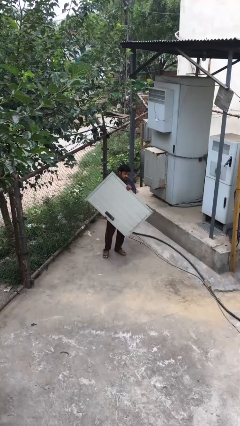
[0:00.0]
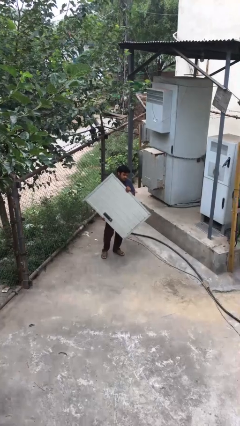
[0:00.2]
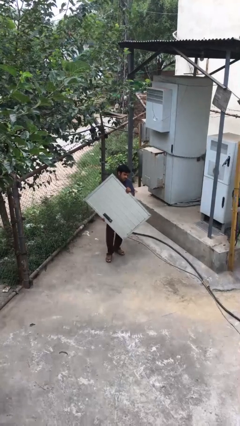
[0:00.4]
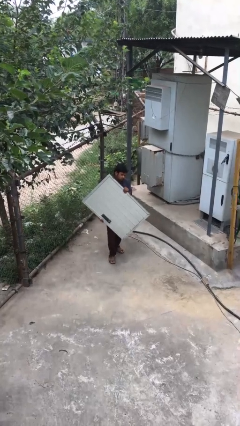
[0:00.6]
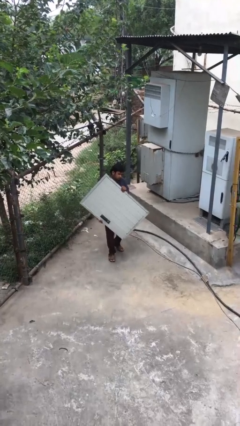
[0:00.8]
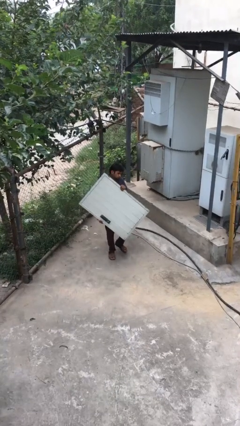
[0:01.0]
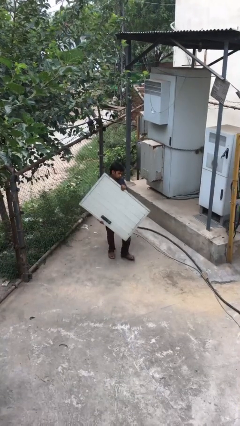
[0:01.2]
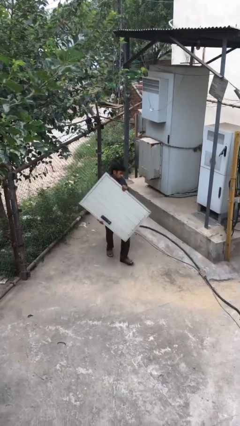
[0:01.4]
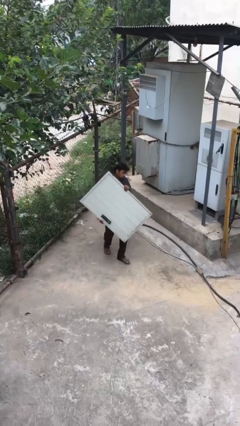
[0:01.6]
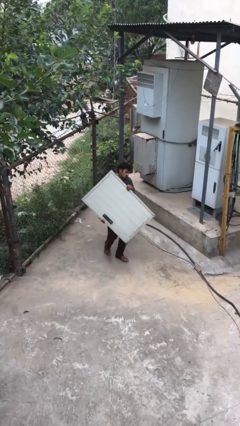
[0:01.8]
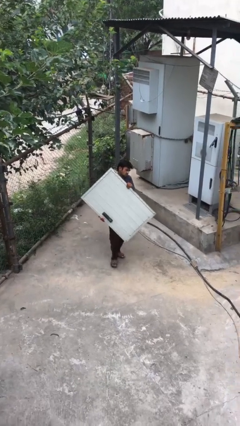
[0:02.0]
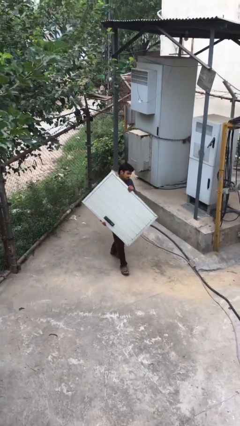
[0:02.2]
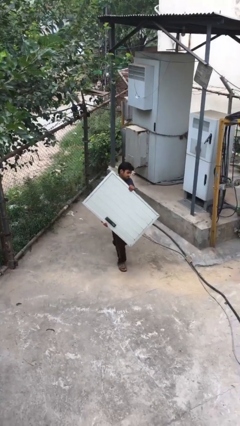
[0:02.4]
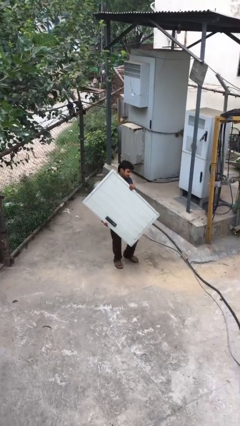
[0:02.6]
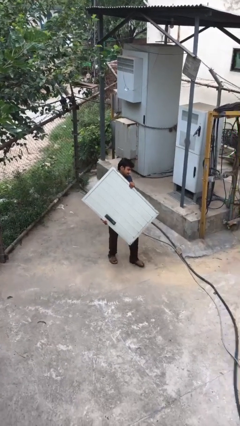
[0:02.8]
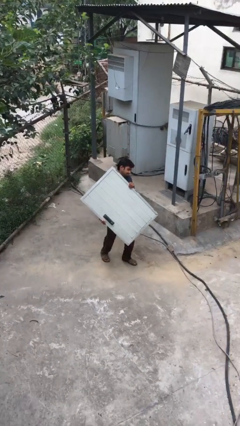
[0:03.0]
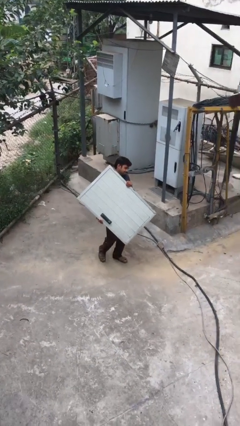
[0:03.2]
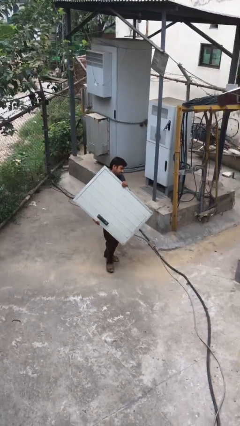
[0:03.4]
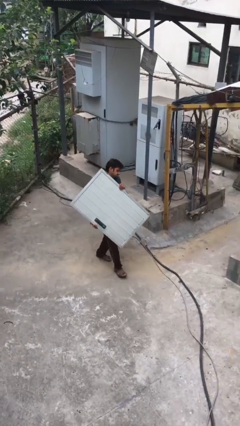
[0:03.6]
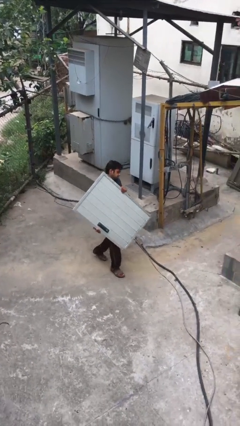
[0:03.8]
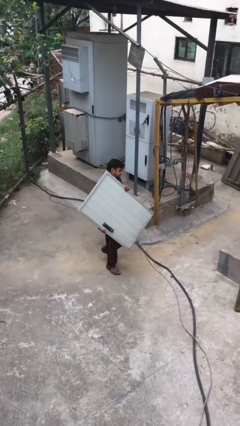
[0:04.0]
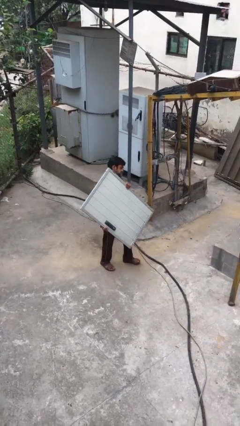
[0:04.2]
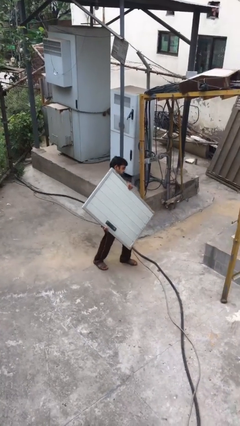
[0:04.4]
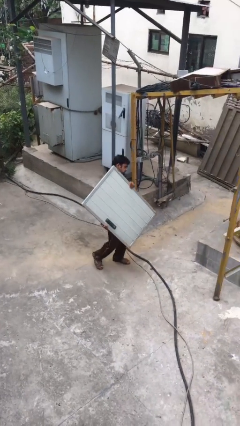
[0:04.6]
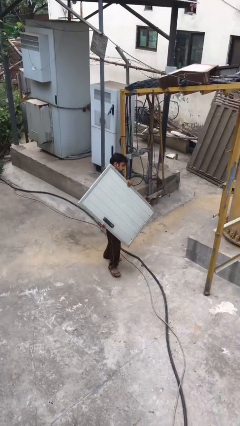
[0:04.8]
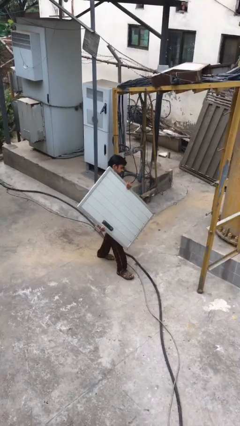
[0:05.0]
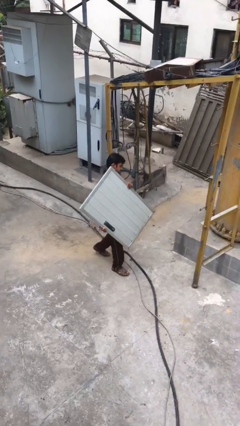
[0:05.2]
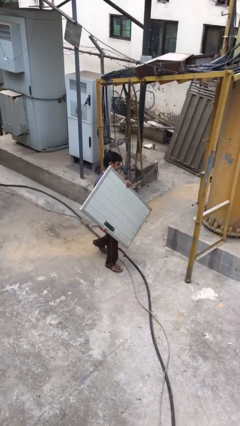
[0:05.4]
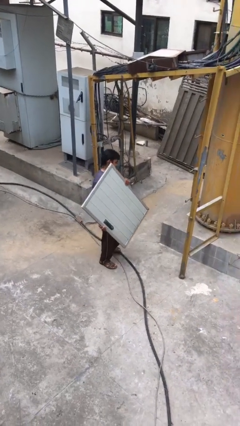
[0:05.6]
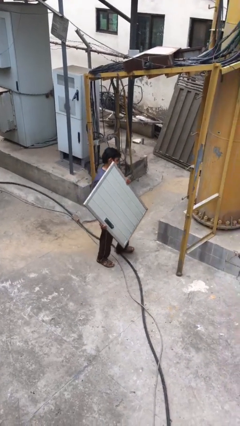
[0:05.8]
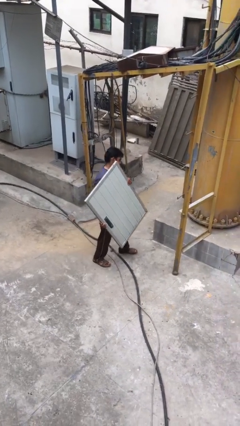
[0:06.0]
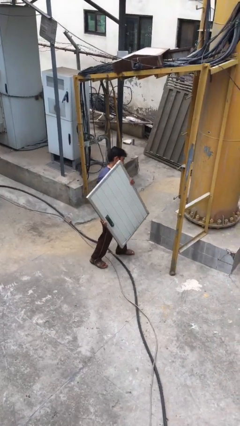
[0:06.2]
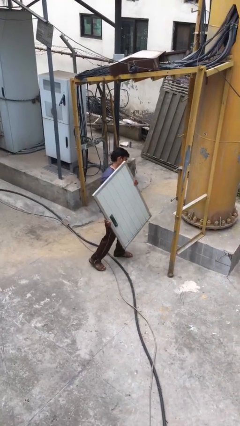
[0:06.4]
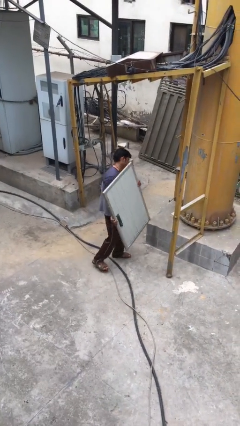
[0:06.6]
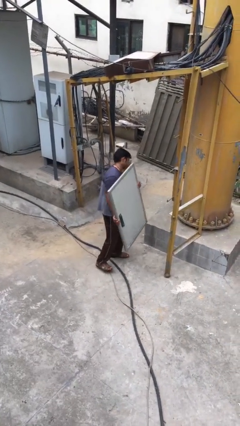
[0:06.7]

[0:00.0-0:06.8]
person carries heavy object

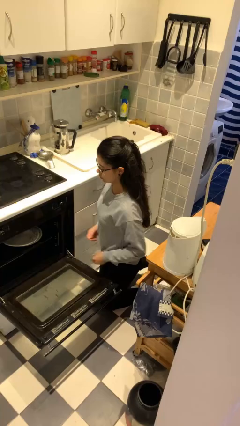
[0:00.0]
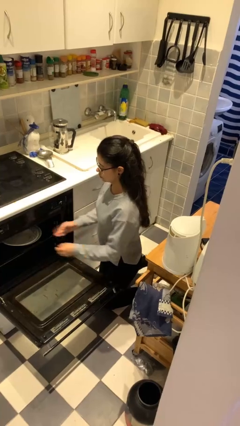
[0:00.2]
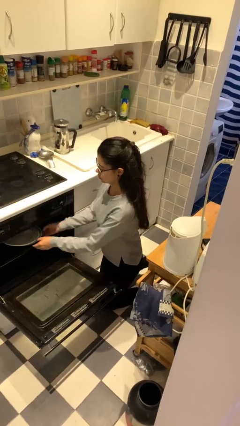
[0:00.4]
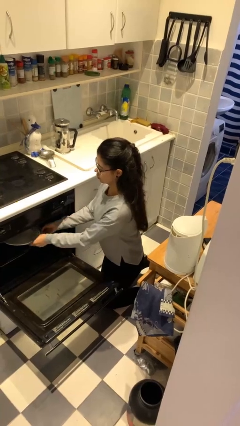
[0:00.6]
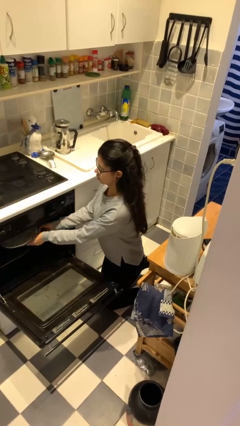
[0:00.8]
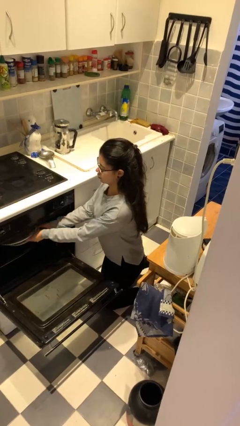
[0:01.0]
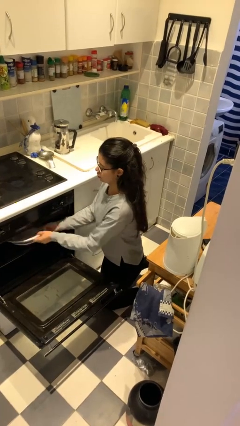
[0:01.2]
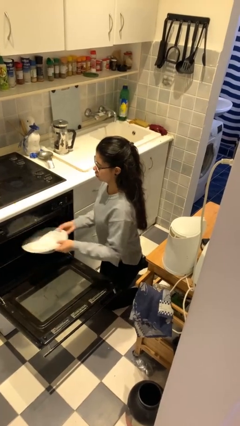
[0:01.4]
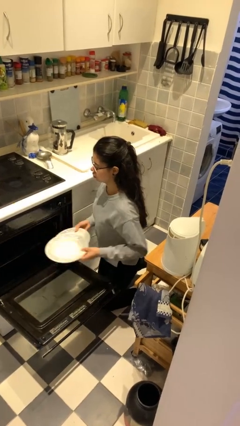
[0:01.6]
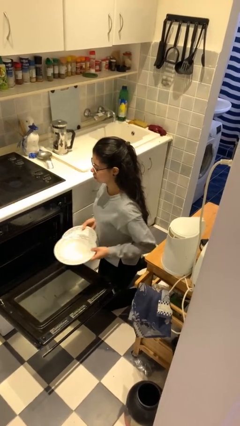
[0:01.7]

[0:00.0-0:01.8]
person unloads dishwasher

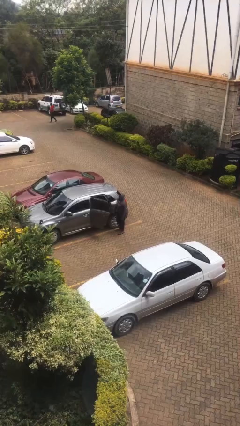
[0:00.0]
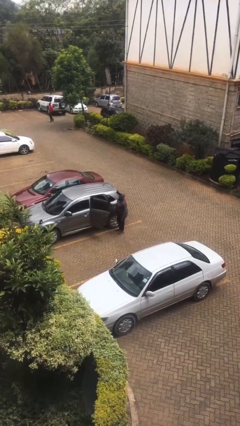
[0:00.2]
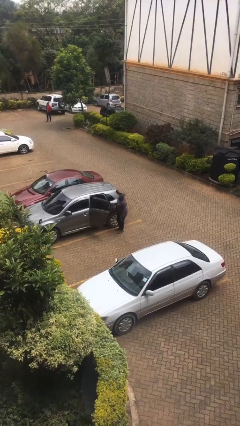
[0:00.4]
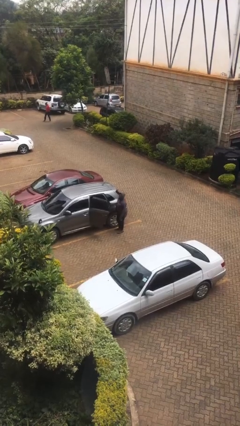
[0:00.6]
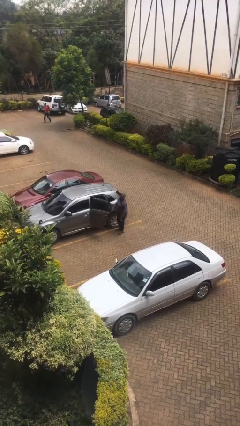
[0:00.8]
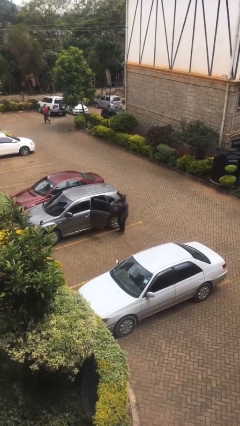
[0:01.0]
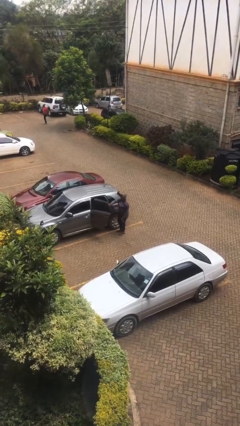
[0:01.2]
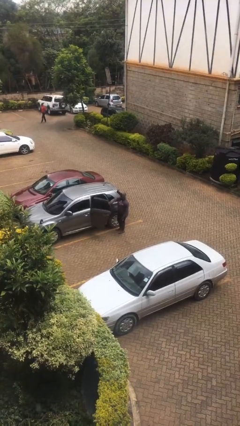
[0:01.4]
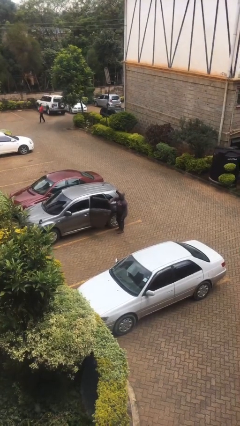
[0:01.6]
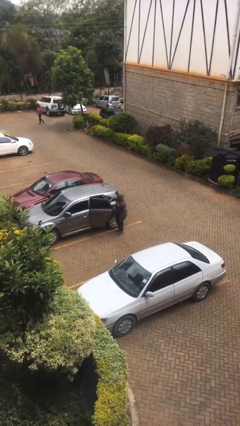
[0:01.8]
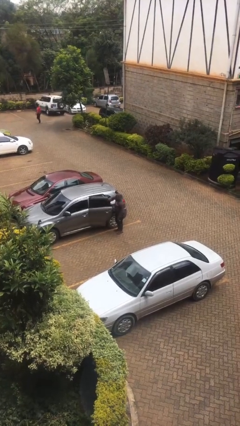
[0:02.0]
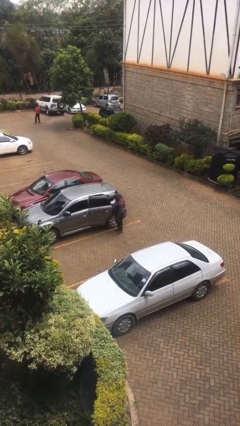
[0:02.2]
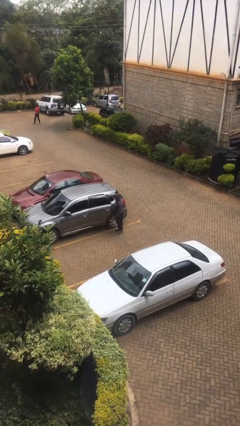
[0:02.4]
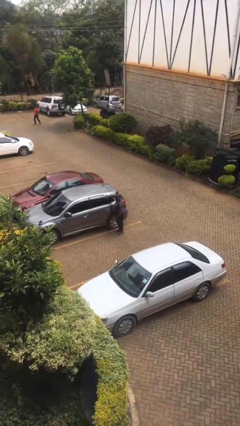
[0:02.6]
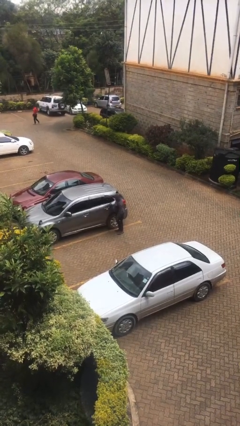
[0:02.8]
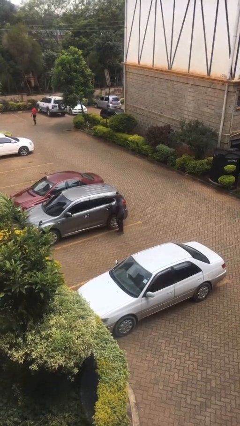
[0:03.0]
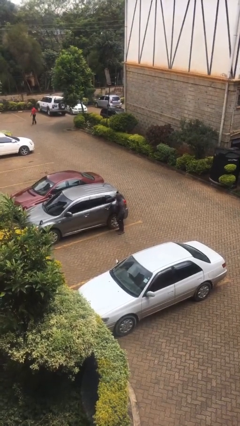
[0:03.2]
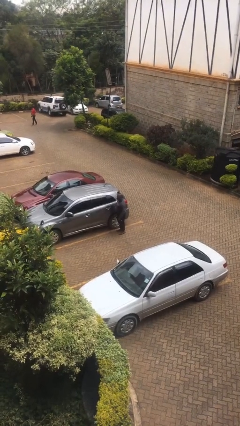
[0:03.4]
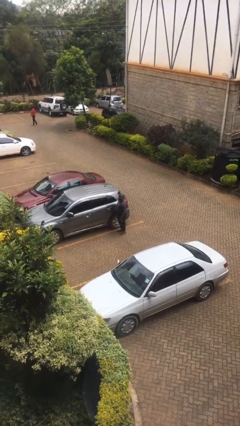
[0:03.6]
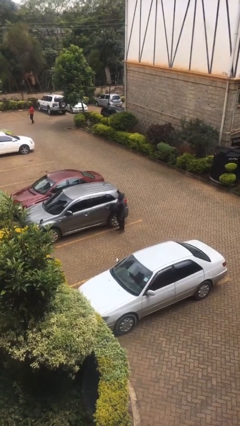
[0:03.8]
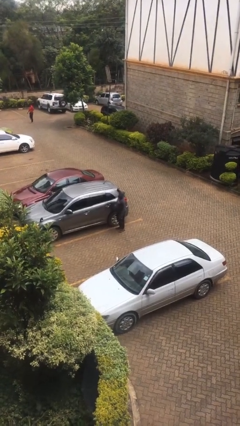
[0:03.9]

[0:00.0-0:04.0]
person closes car door

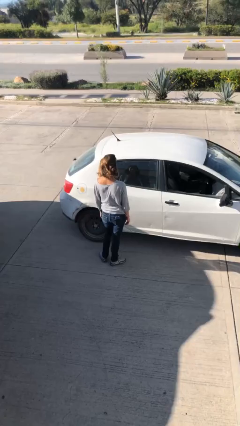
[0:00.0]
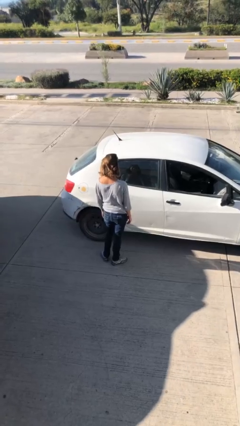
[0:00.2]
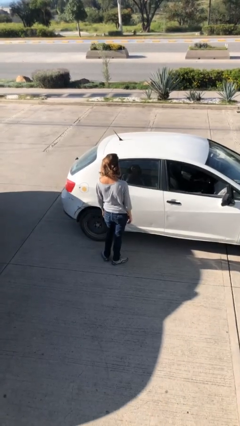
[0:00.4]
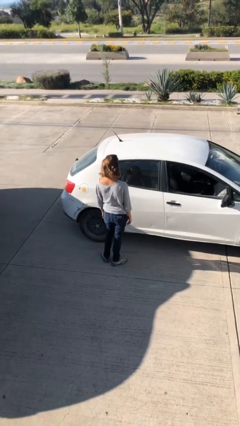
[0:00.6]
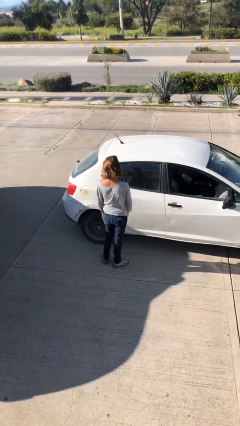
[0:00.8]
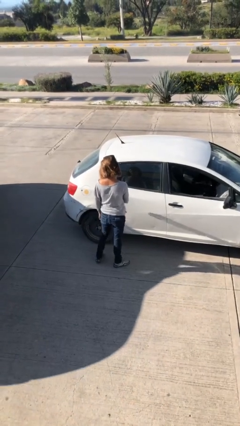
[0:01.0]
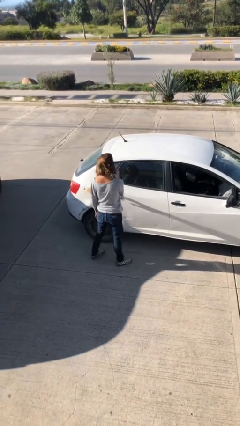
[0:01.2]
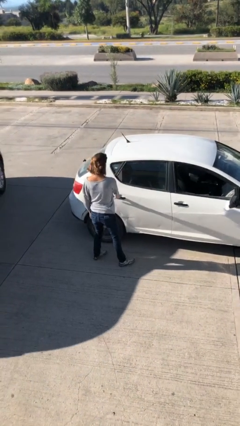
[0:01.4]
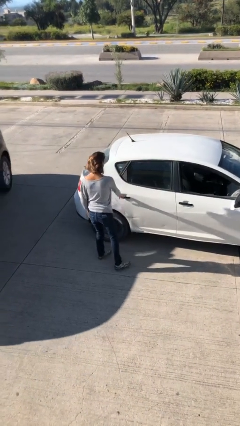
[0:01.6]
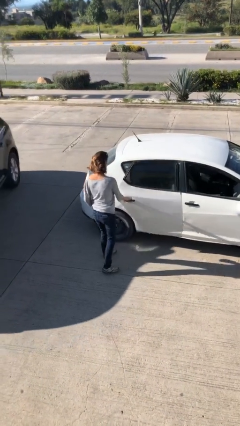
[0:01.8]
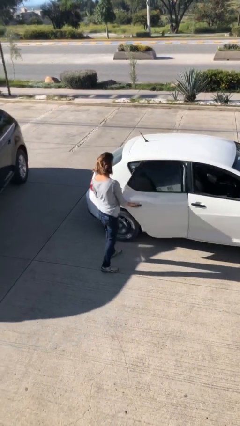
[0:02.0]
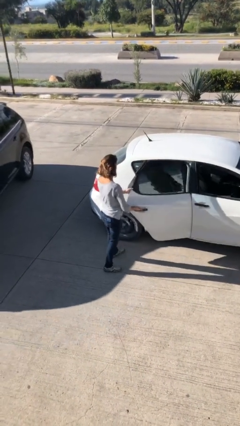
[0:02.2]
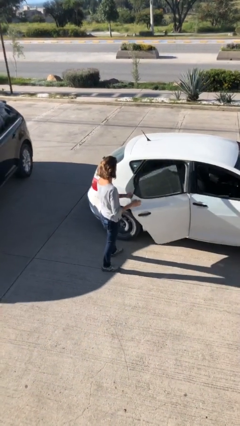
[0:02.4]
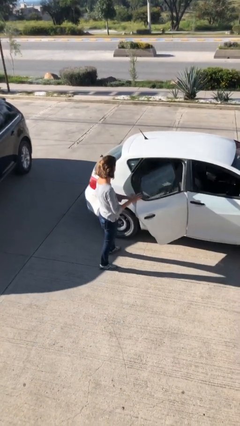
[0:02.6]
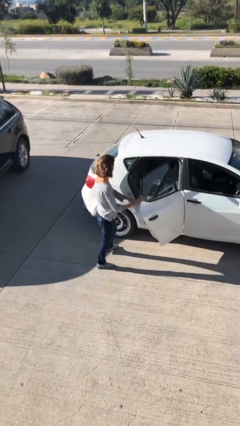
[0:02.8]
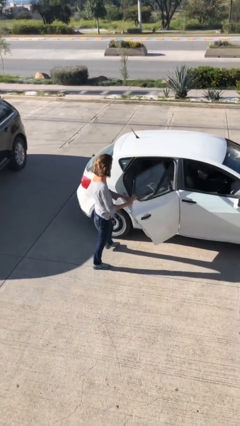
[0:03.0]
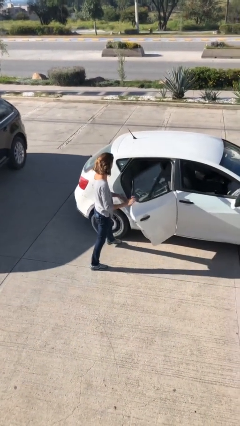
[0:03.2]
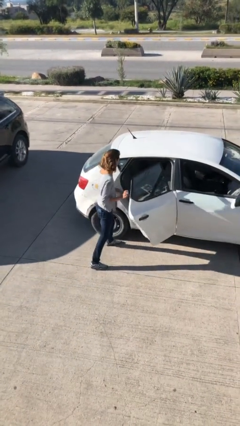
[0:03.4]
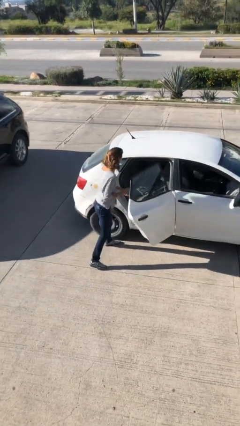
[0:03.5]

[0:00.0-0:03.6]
person opens car door

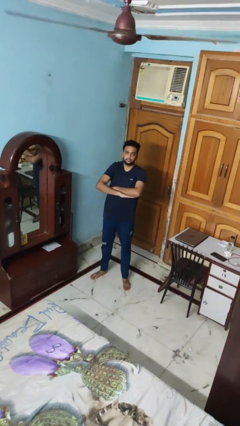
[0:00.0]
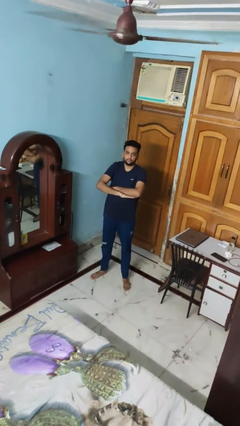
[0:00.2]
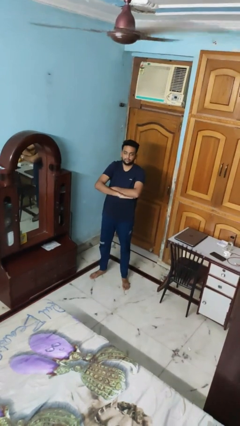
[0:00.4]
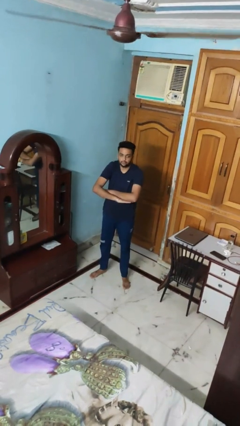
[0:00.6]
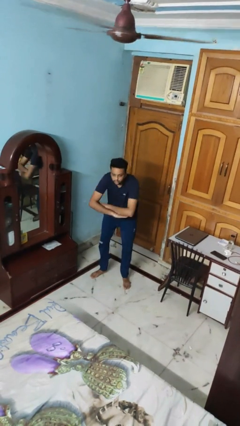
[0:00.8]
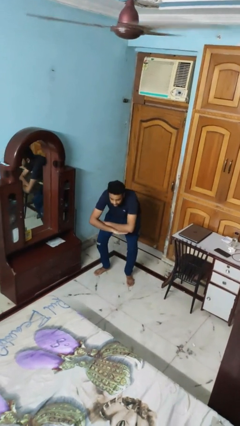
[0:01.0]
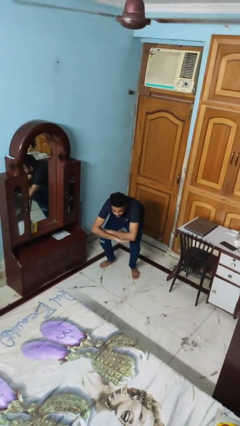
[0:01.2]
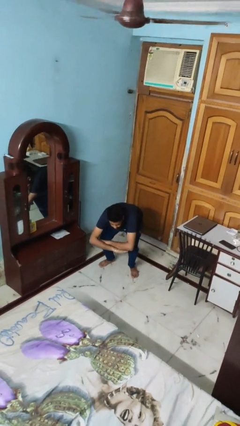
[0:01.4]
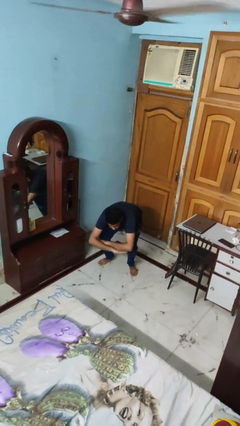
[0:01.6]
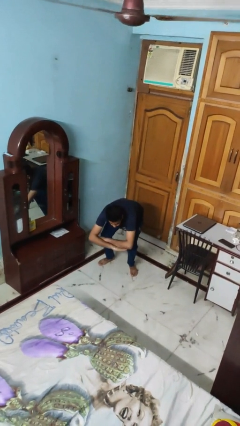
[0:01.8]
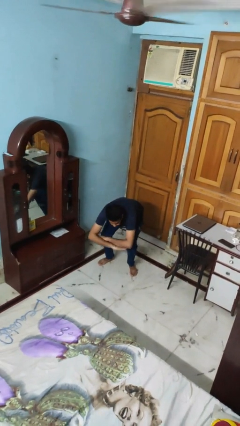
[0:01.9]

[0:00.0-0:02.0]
person squats
